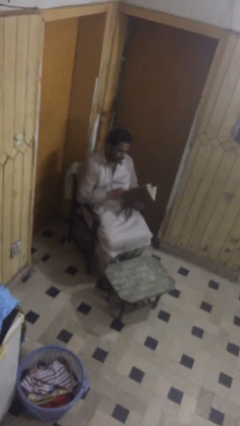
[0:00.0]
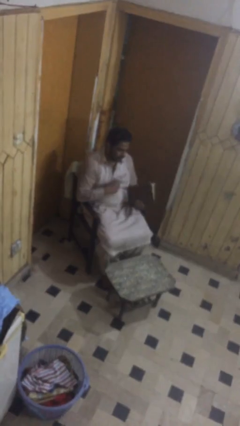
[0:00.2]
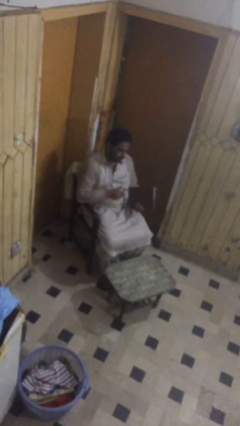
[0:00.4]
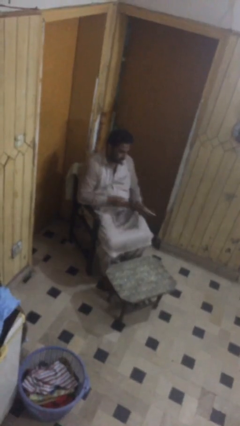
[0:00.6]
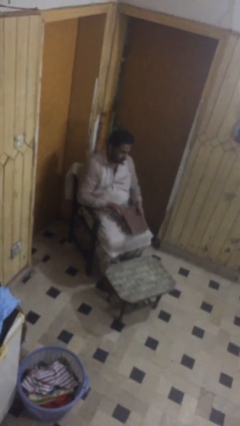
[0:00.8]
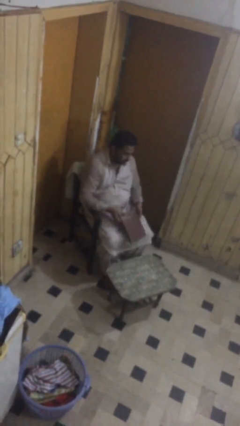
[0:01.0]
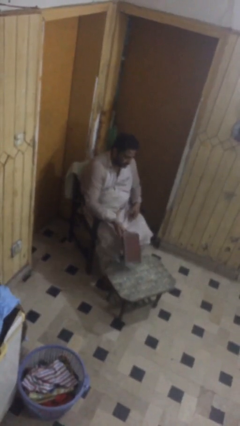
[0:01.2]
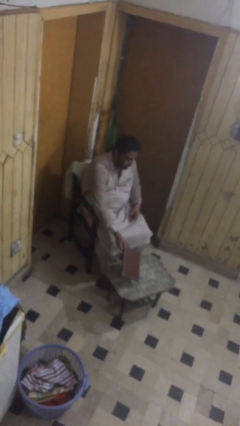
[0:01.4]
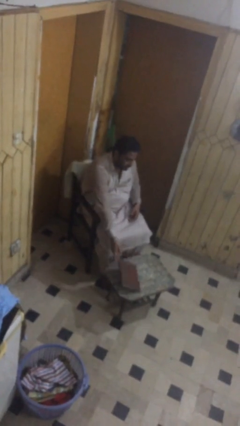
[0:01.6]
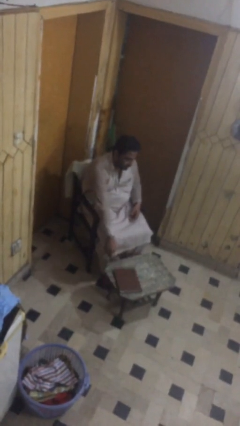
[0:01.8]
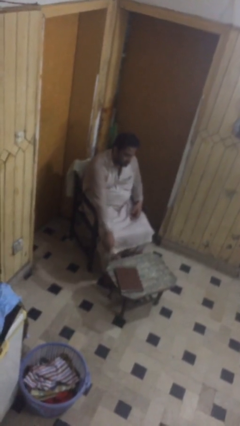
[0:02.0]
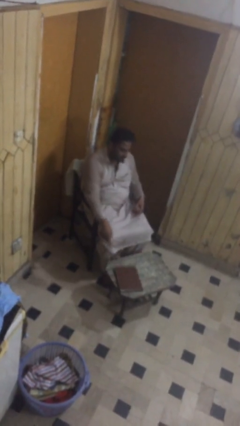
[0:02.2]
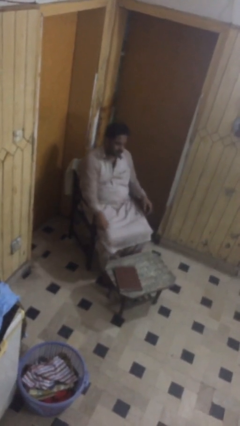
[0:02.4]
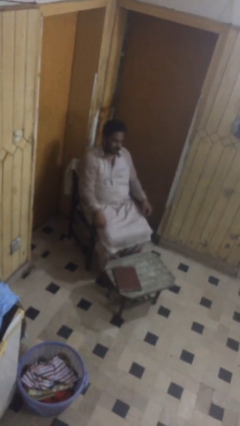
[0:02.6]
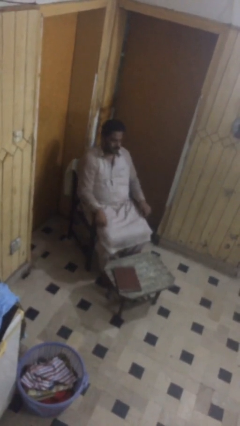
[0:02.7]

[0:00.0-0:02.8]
person puts down object on table

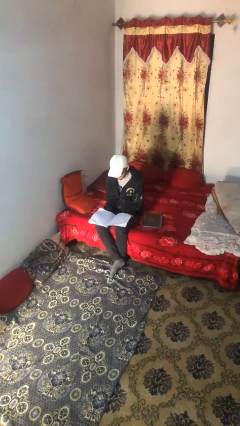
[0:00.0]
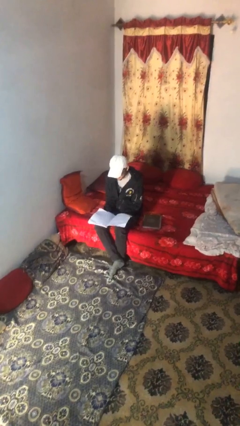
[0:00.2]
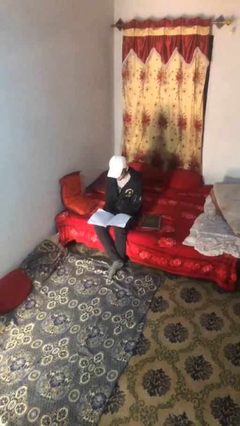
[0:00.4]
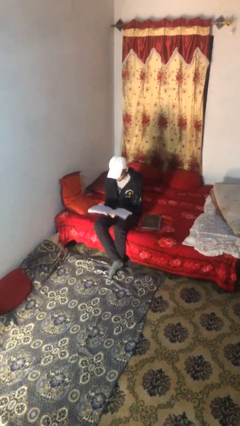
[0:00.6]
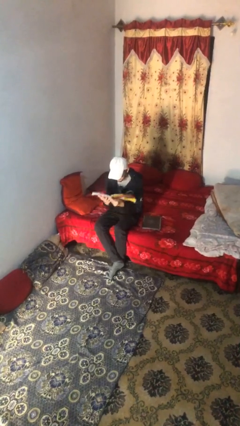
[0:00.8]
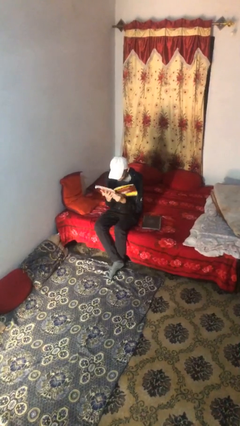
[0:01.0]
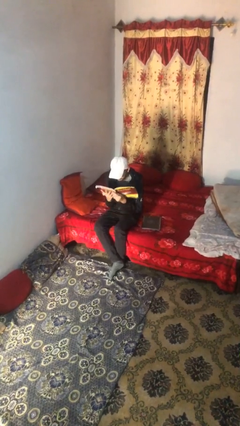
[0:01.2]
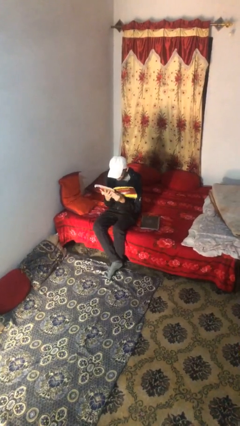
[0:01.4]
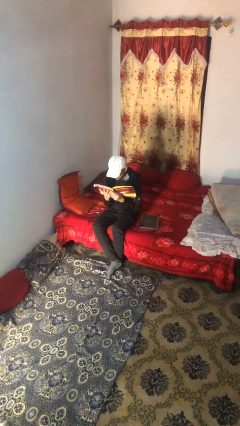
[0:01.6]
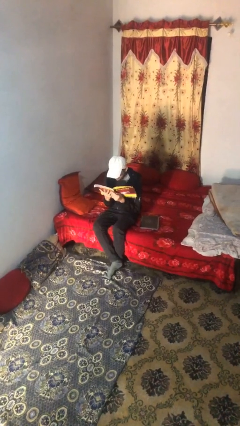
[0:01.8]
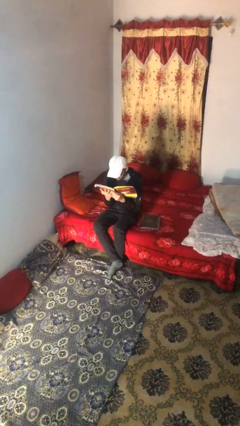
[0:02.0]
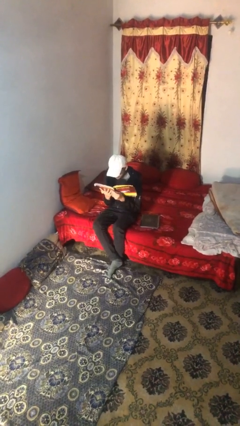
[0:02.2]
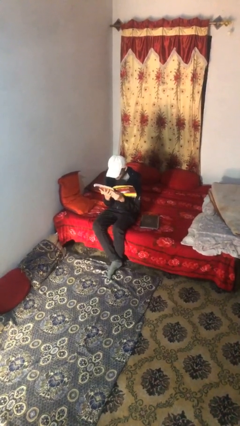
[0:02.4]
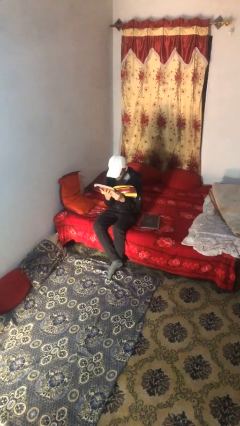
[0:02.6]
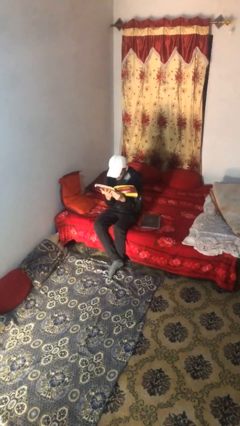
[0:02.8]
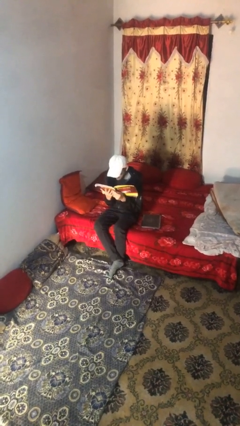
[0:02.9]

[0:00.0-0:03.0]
person reads document

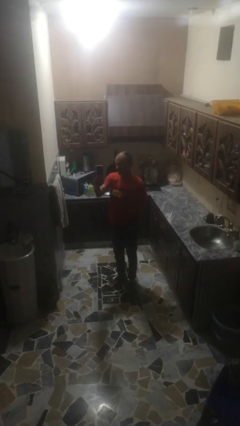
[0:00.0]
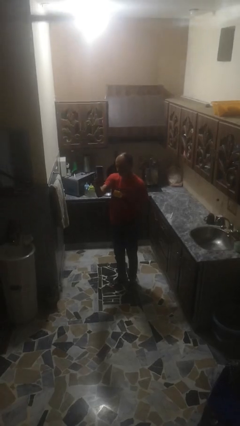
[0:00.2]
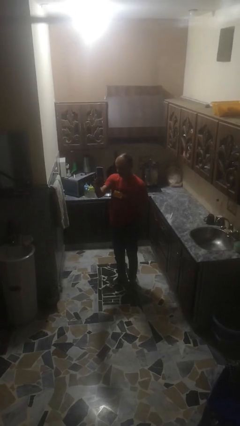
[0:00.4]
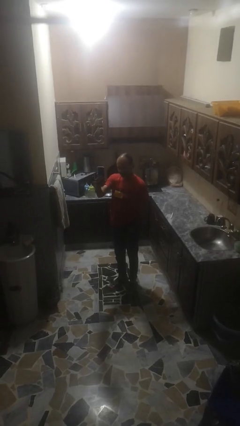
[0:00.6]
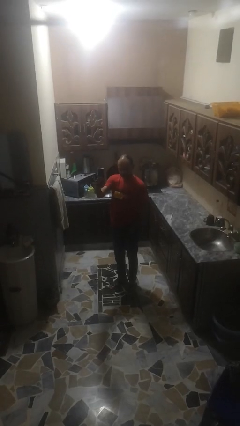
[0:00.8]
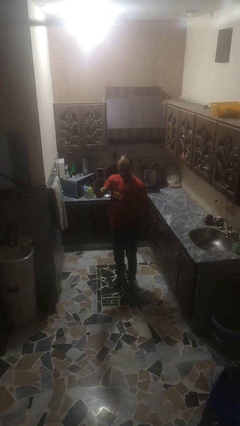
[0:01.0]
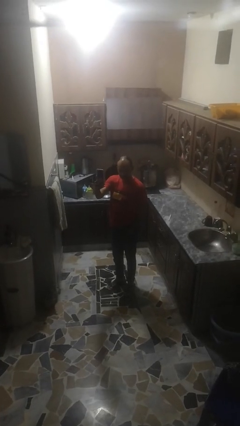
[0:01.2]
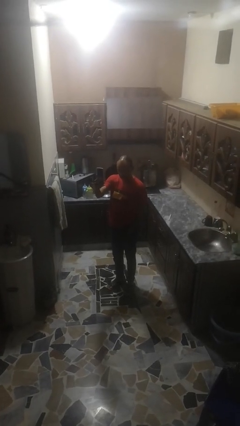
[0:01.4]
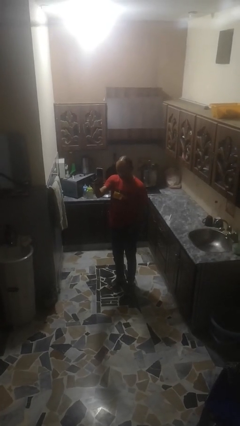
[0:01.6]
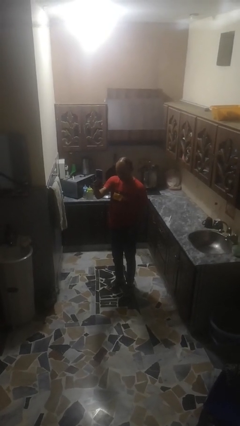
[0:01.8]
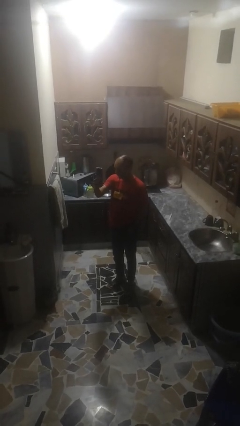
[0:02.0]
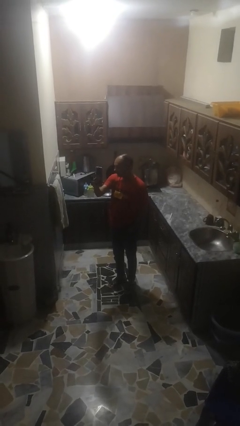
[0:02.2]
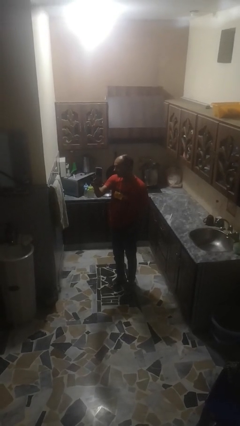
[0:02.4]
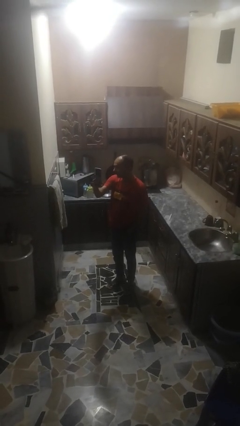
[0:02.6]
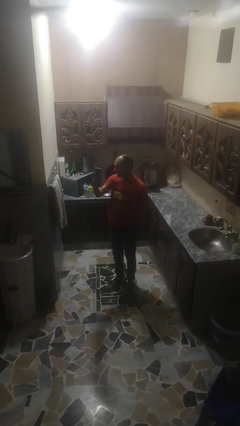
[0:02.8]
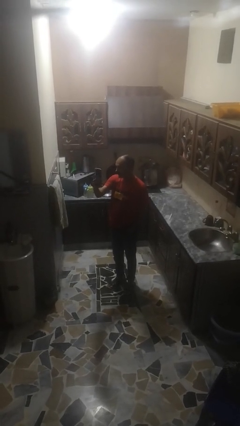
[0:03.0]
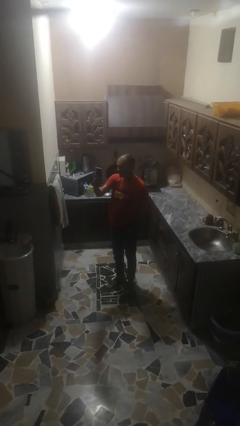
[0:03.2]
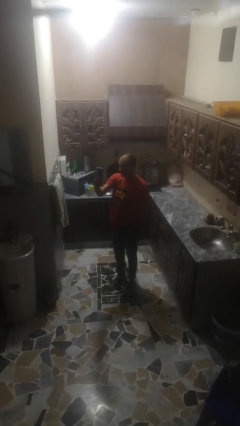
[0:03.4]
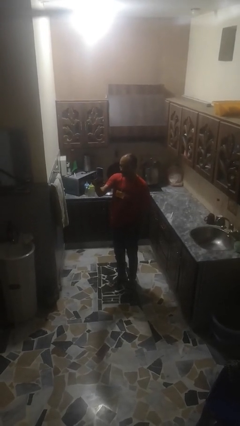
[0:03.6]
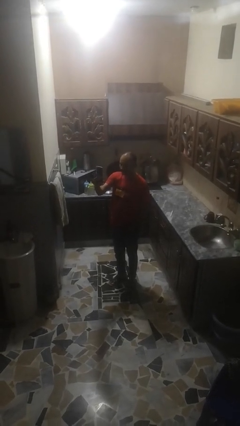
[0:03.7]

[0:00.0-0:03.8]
person takes selfie

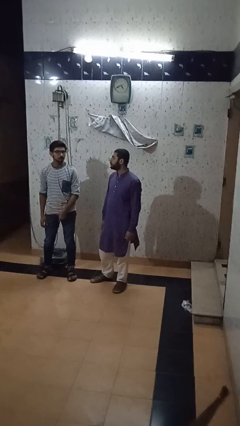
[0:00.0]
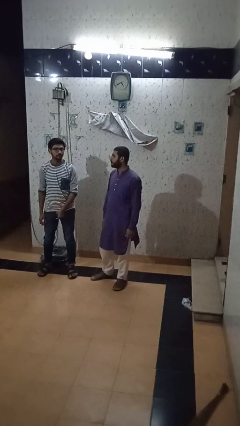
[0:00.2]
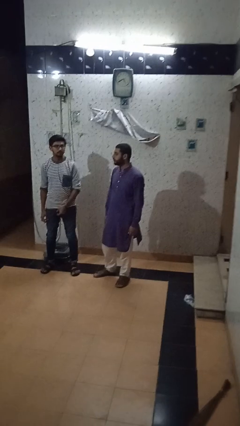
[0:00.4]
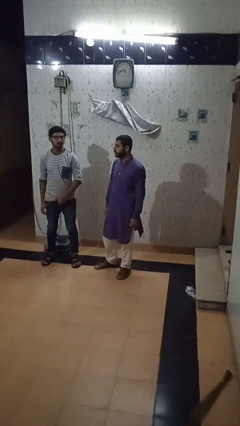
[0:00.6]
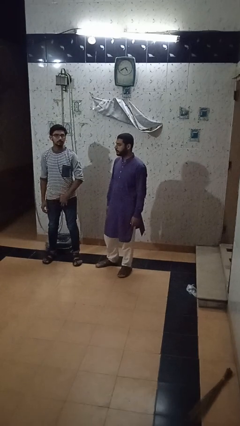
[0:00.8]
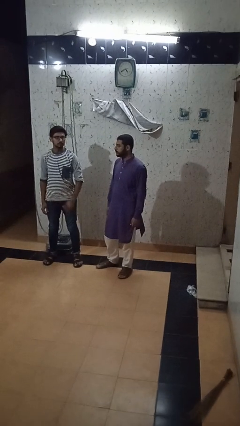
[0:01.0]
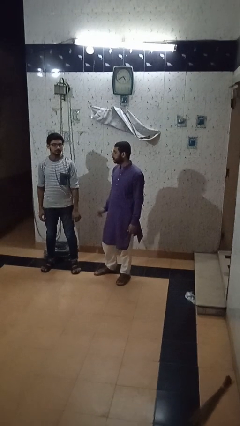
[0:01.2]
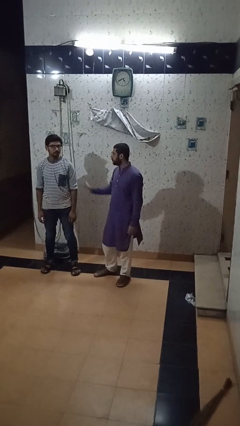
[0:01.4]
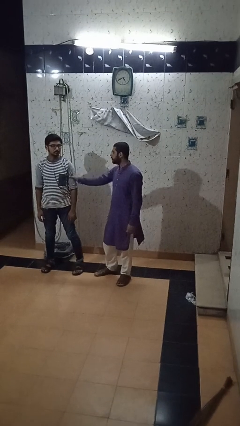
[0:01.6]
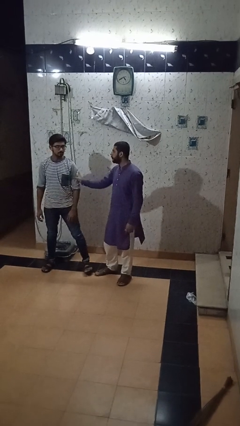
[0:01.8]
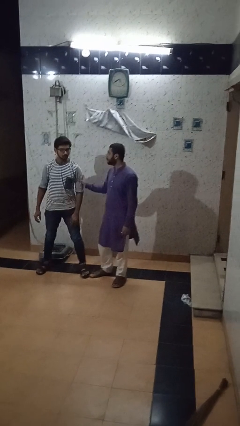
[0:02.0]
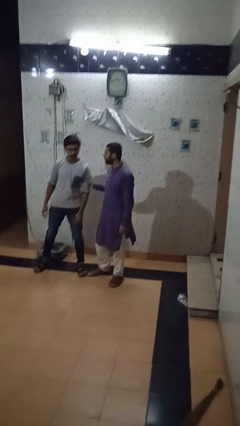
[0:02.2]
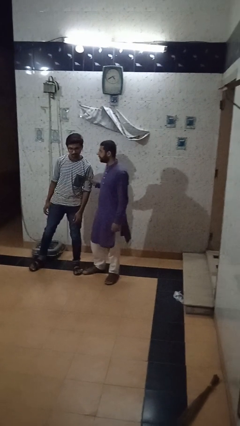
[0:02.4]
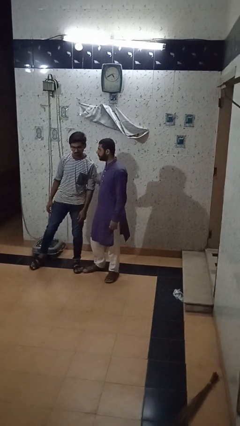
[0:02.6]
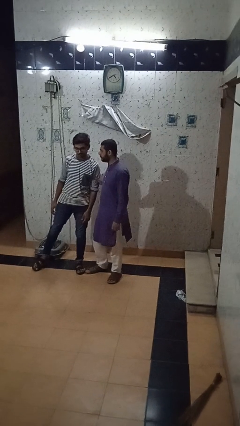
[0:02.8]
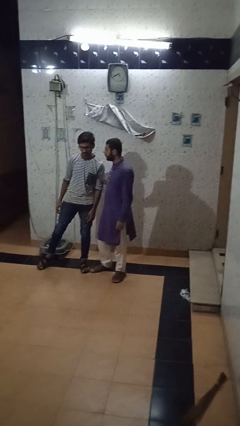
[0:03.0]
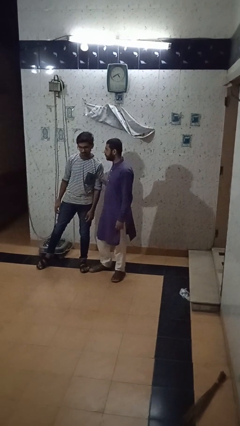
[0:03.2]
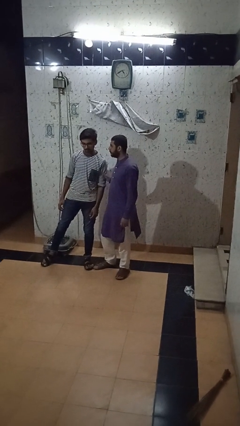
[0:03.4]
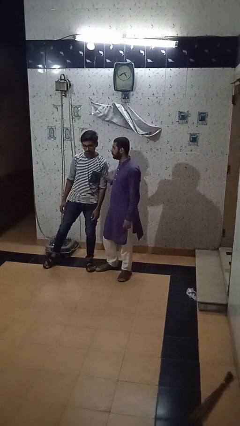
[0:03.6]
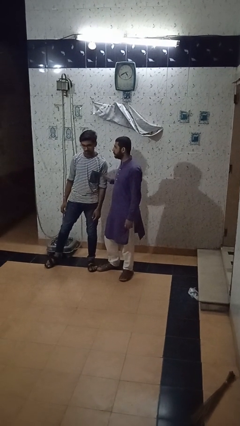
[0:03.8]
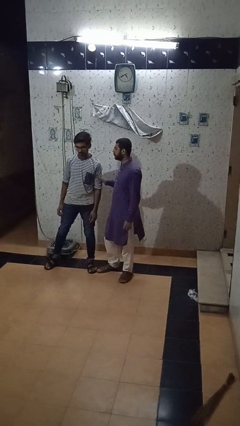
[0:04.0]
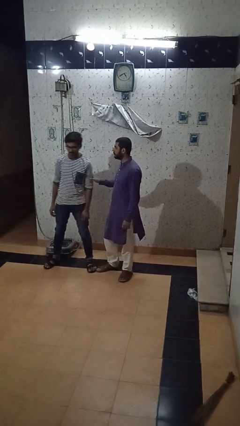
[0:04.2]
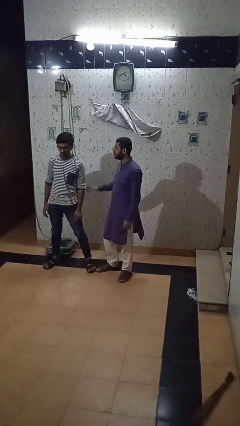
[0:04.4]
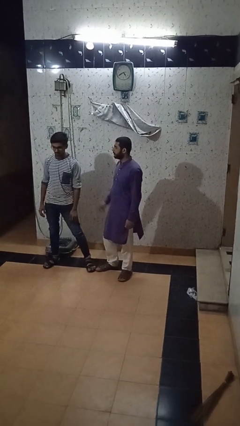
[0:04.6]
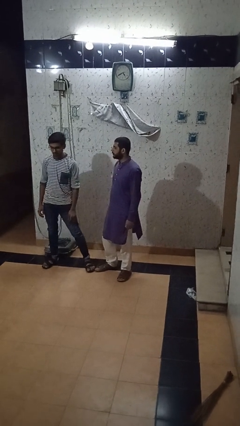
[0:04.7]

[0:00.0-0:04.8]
person grabs person by bicep

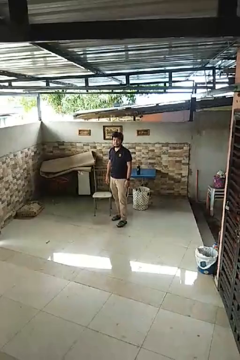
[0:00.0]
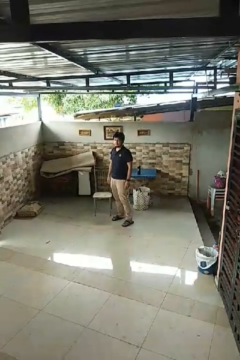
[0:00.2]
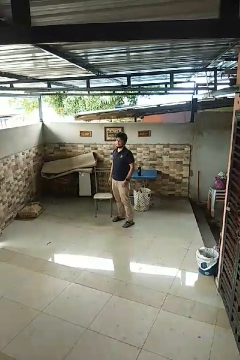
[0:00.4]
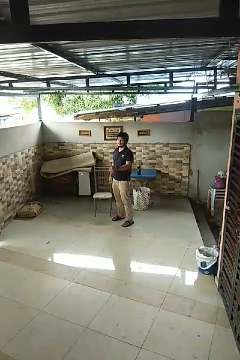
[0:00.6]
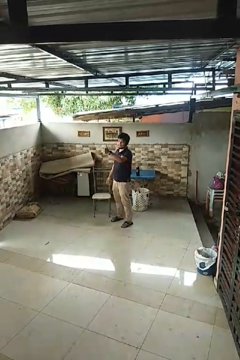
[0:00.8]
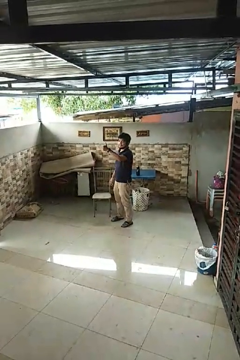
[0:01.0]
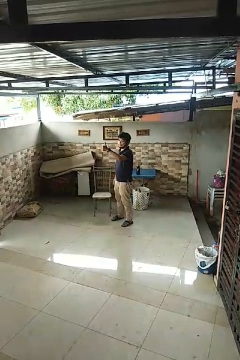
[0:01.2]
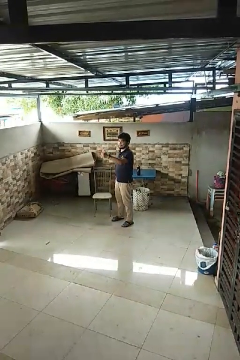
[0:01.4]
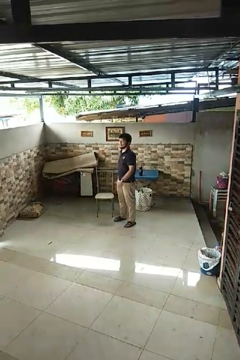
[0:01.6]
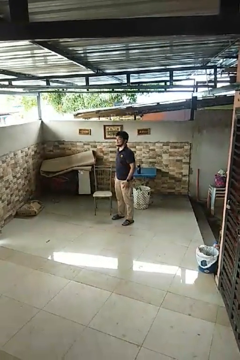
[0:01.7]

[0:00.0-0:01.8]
person gestures thumbs up

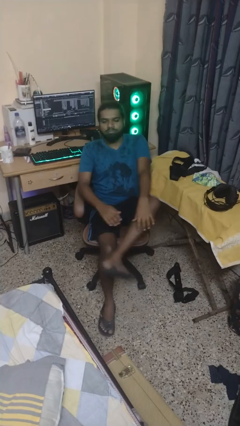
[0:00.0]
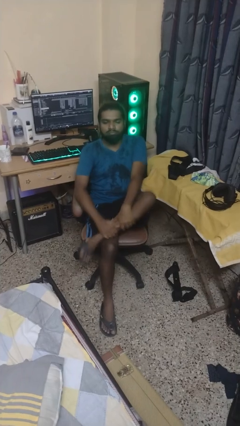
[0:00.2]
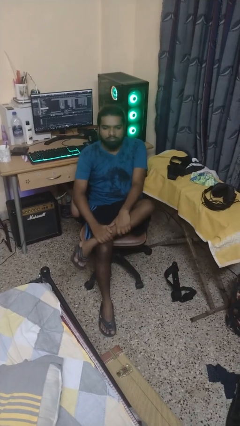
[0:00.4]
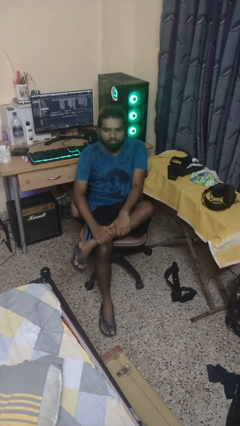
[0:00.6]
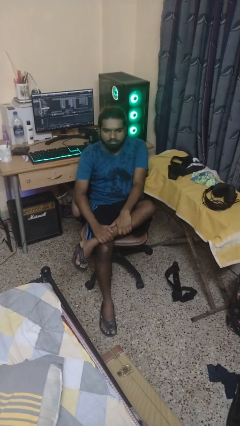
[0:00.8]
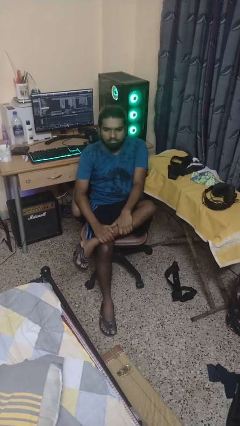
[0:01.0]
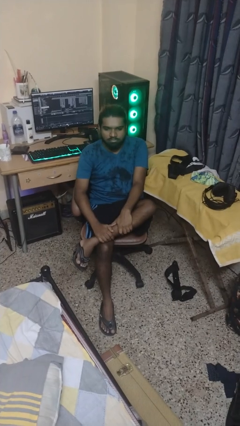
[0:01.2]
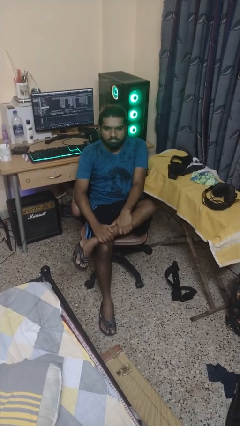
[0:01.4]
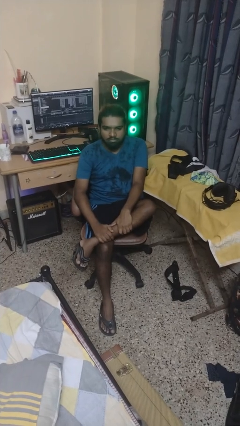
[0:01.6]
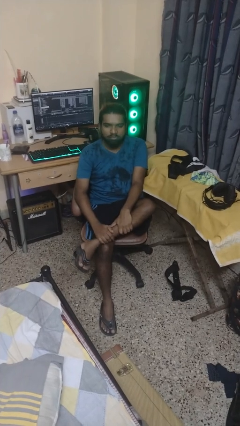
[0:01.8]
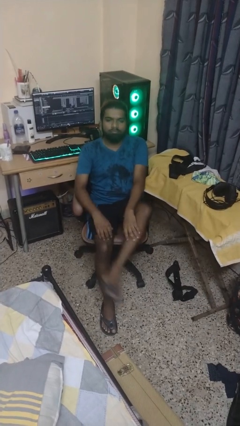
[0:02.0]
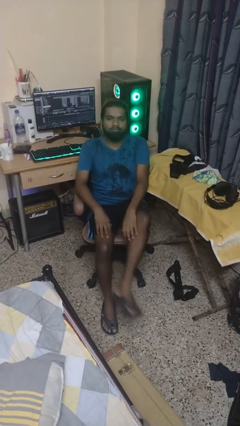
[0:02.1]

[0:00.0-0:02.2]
person crosses legs
